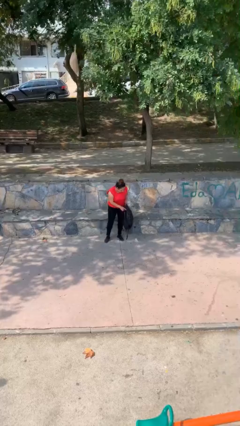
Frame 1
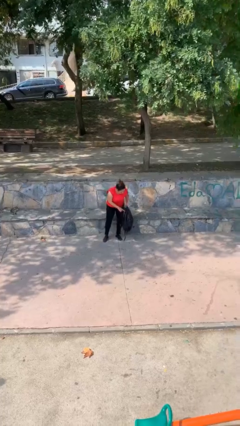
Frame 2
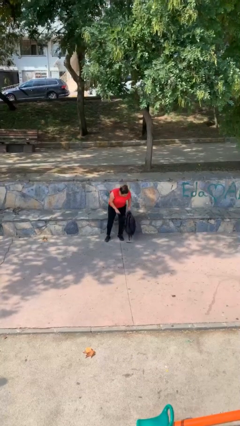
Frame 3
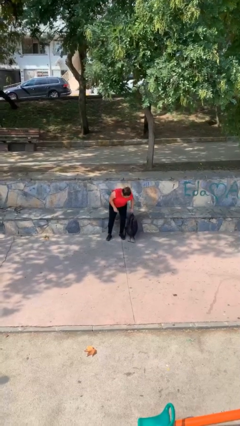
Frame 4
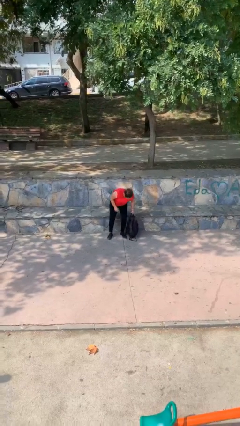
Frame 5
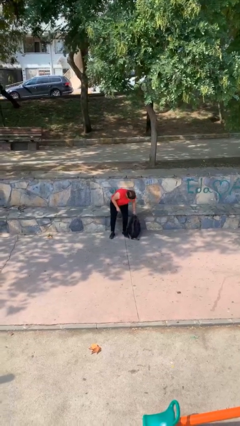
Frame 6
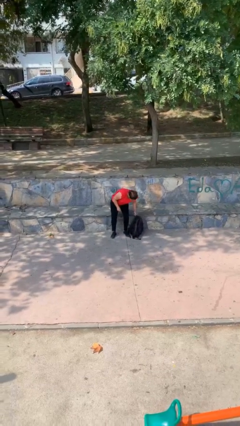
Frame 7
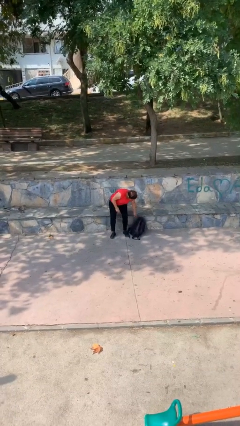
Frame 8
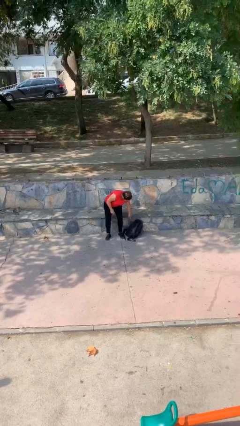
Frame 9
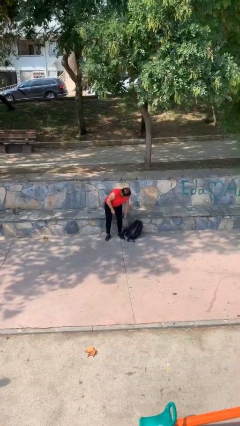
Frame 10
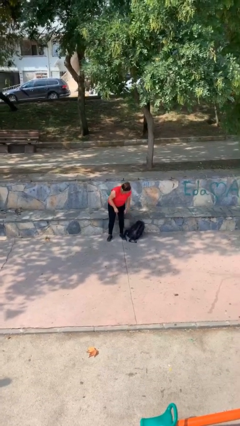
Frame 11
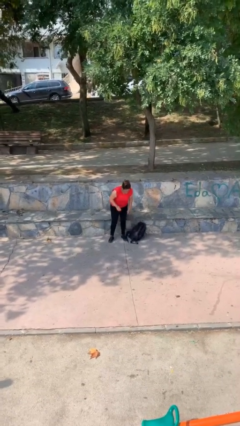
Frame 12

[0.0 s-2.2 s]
person puts down object on floor

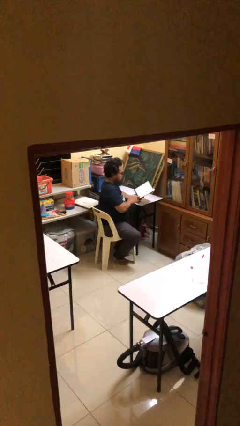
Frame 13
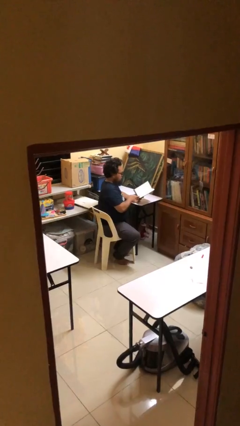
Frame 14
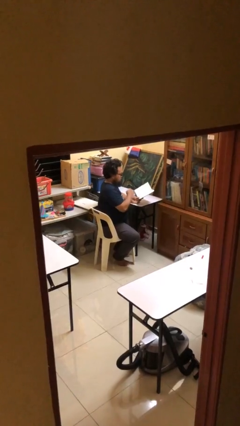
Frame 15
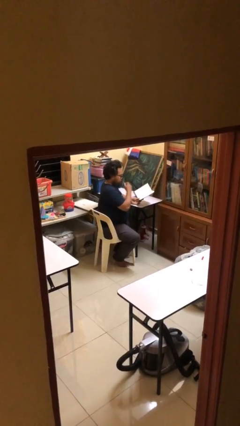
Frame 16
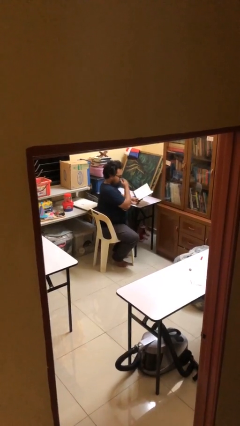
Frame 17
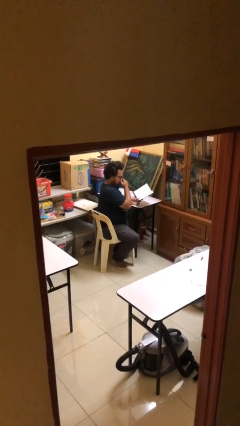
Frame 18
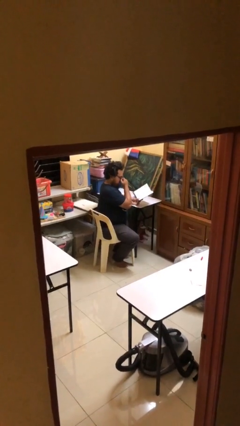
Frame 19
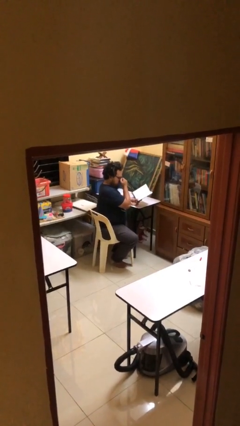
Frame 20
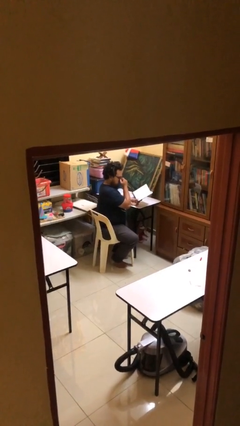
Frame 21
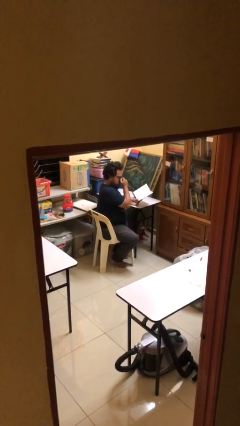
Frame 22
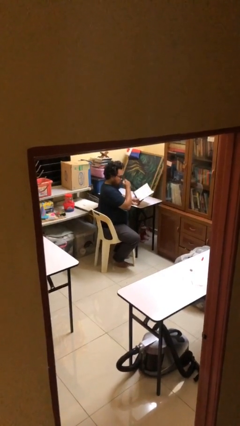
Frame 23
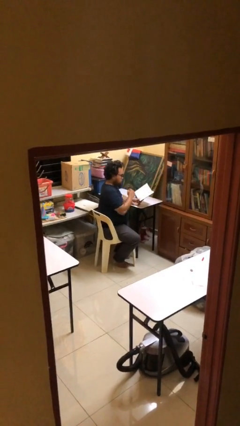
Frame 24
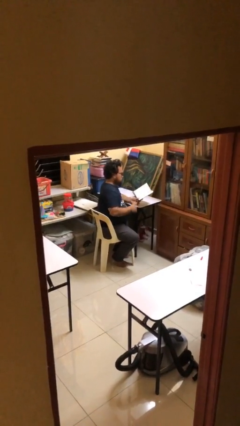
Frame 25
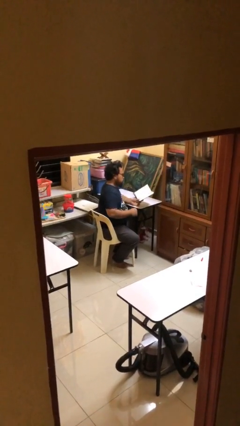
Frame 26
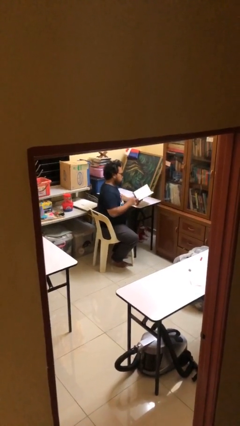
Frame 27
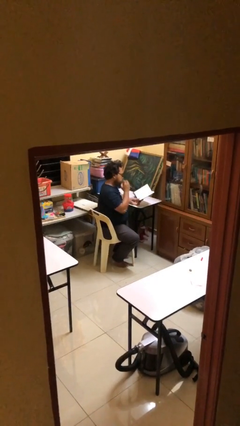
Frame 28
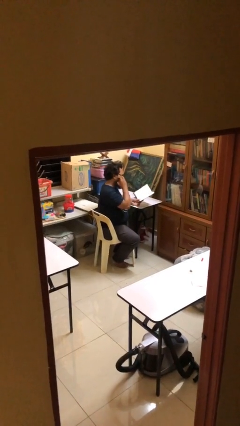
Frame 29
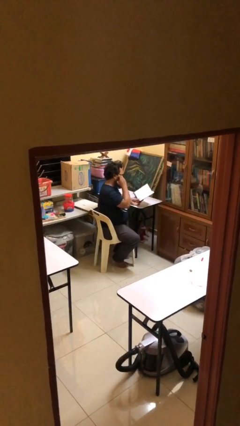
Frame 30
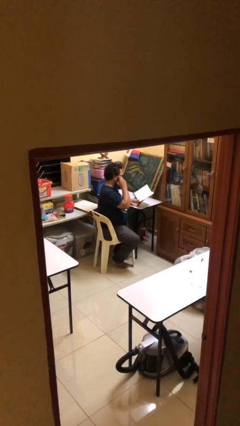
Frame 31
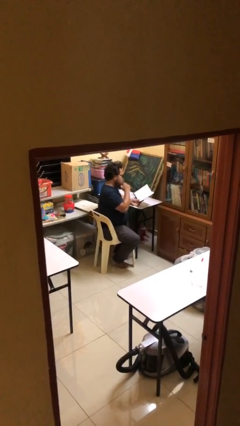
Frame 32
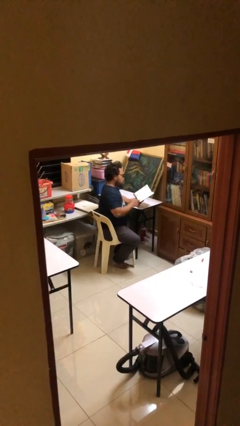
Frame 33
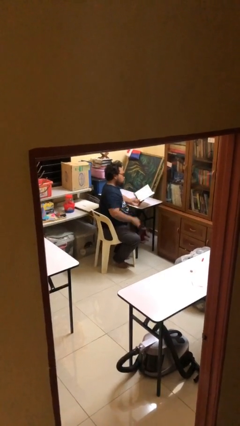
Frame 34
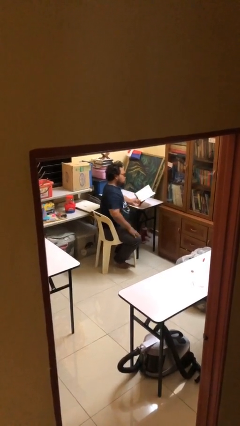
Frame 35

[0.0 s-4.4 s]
person reads document

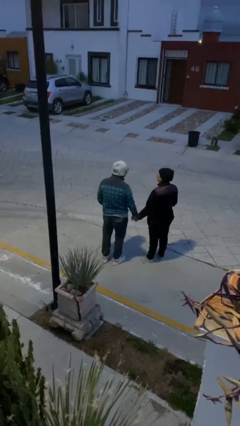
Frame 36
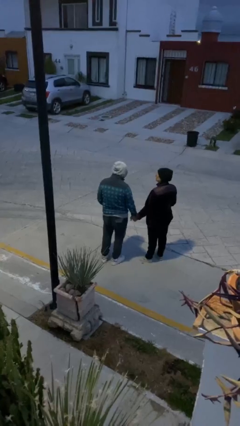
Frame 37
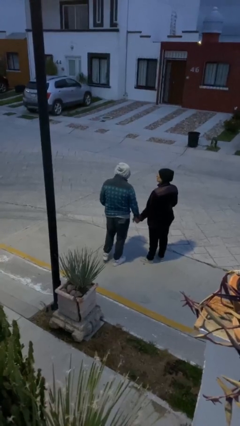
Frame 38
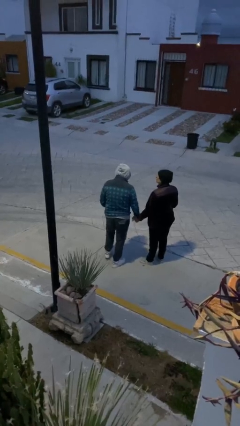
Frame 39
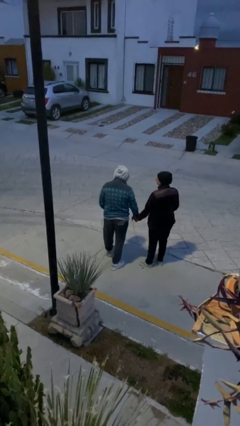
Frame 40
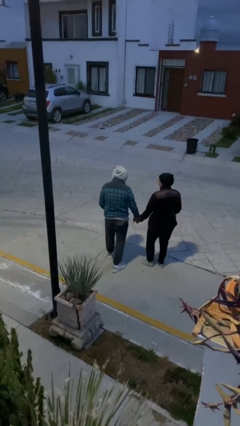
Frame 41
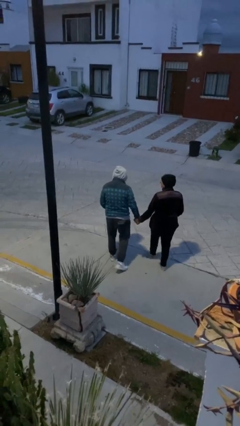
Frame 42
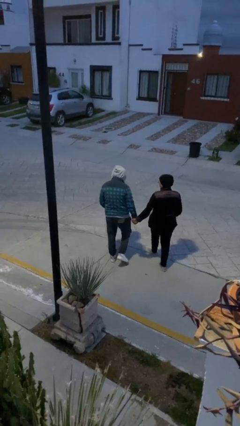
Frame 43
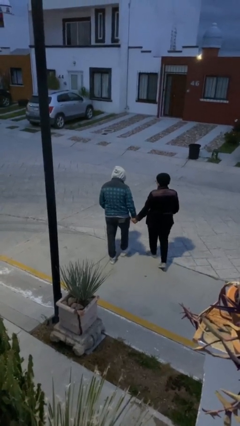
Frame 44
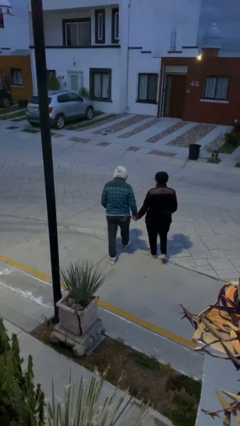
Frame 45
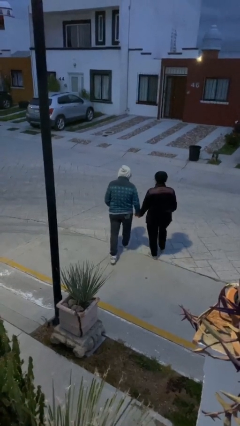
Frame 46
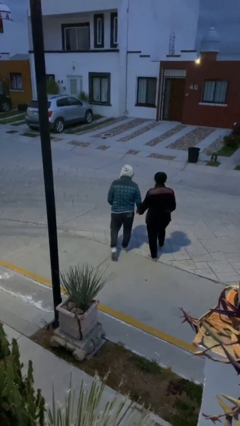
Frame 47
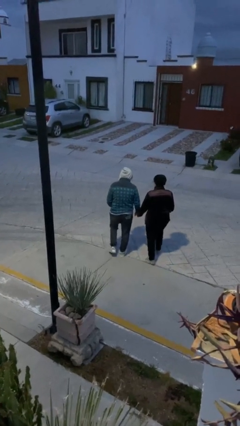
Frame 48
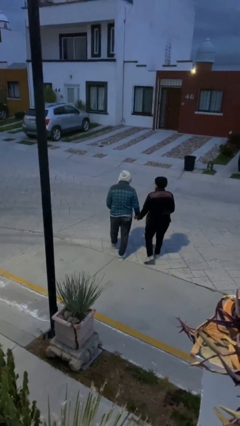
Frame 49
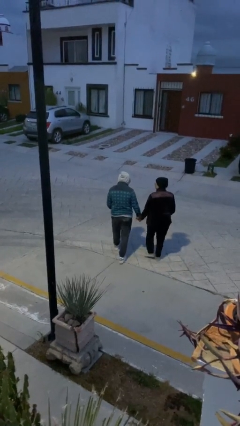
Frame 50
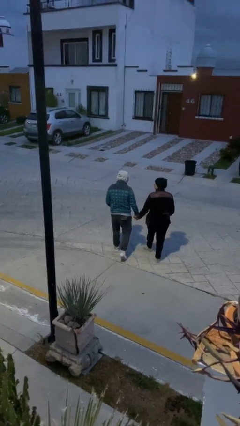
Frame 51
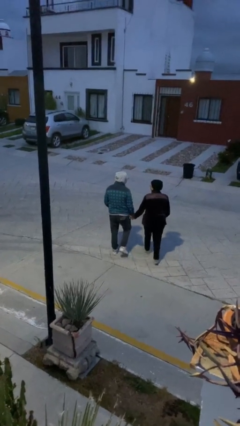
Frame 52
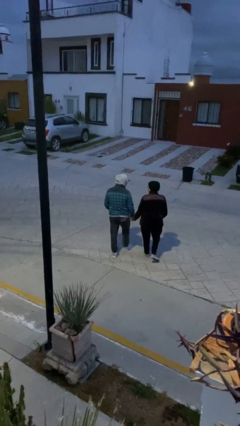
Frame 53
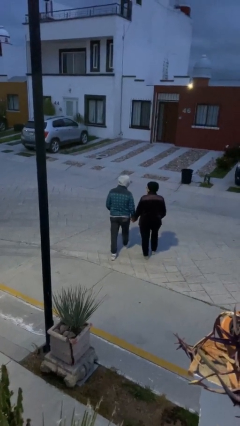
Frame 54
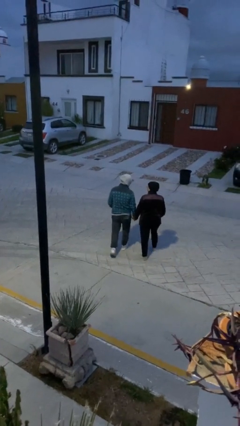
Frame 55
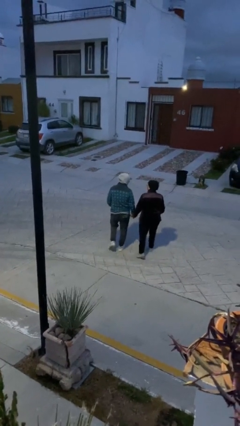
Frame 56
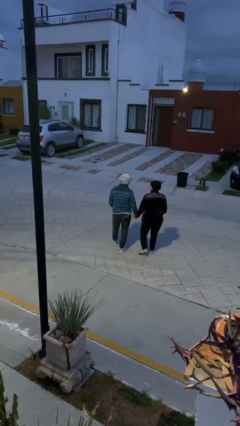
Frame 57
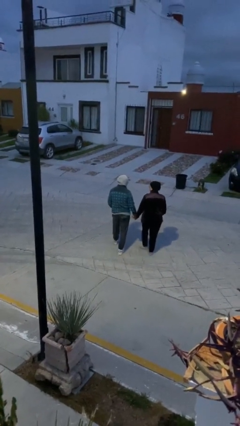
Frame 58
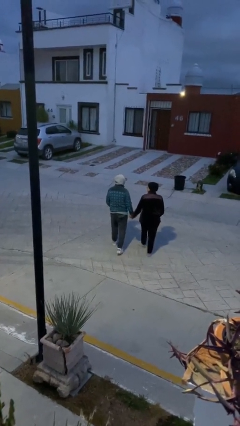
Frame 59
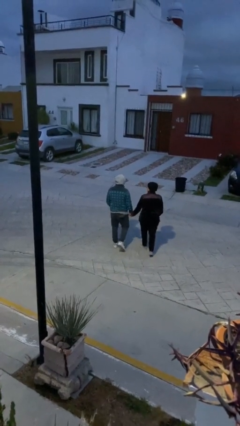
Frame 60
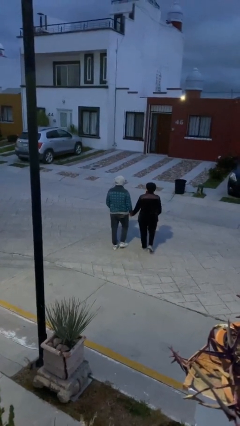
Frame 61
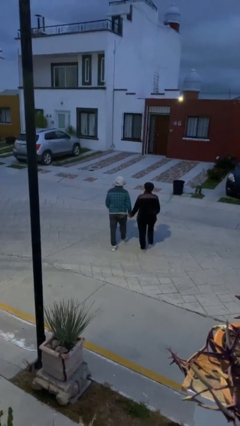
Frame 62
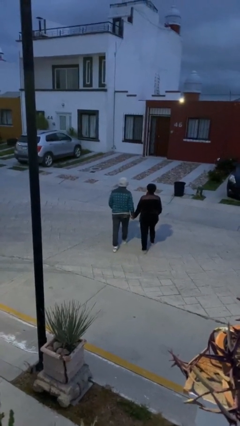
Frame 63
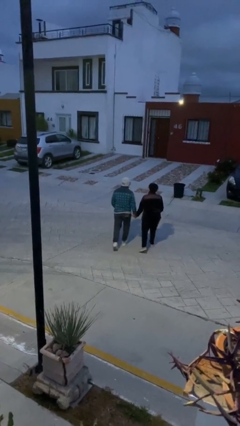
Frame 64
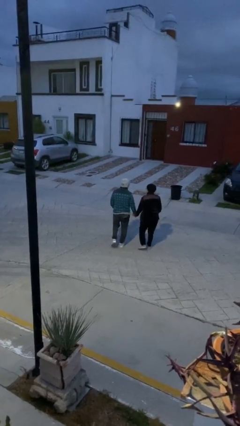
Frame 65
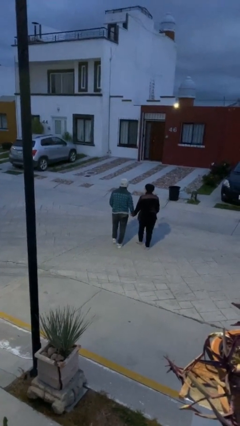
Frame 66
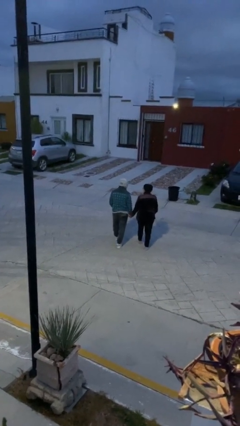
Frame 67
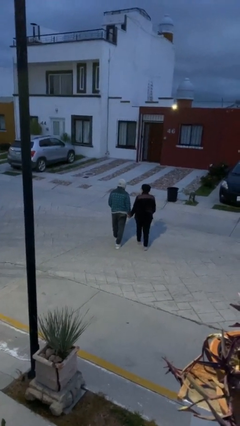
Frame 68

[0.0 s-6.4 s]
person holds hand

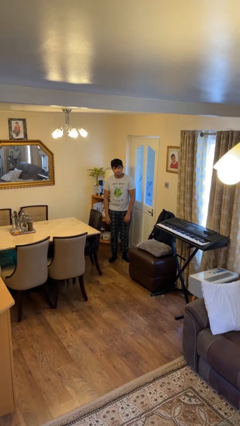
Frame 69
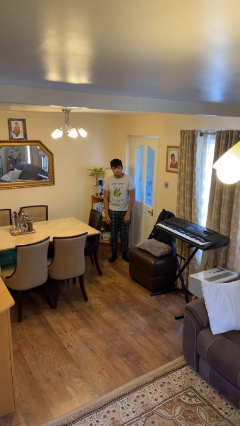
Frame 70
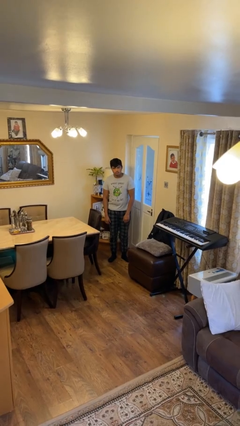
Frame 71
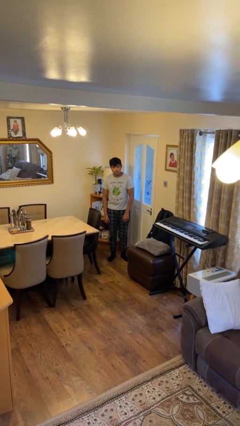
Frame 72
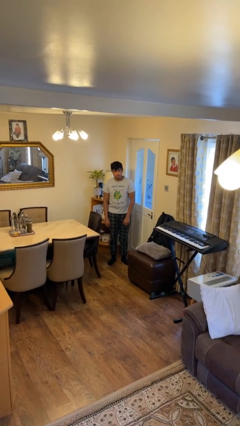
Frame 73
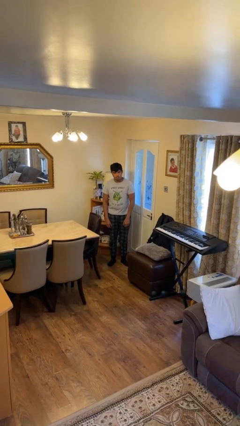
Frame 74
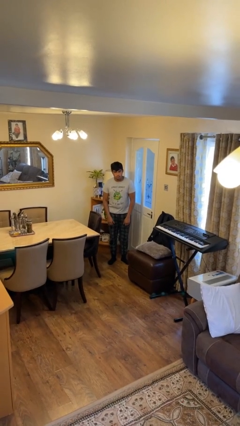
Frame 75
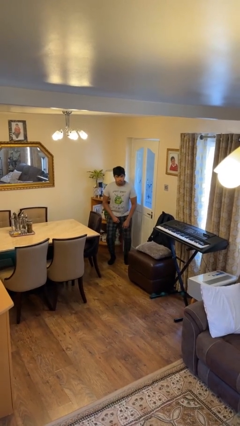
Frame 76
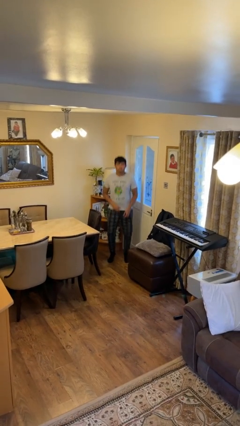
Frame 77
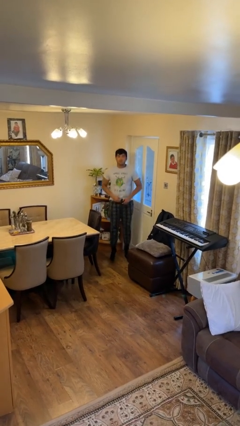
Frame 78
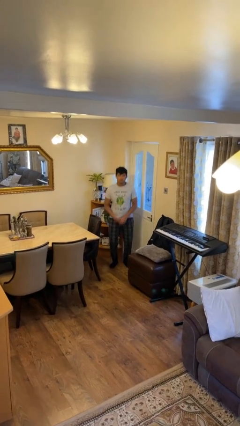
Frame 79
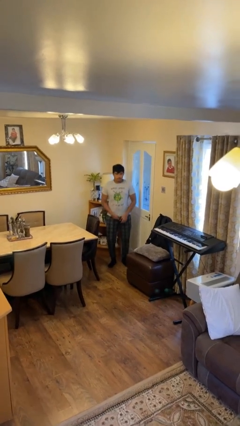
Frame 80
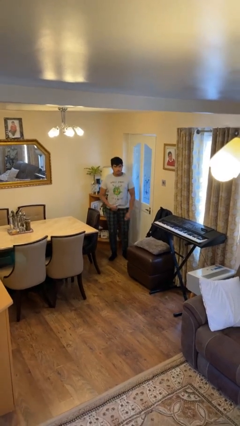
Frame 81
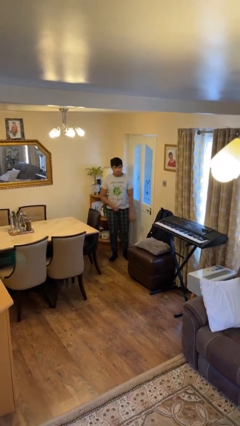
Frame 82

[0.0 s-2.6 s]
person jumps

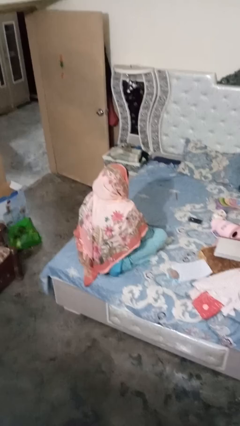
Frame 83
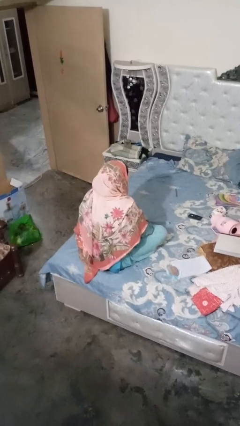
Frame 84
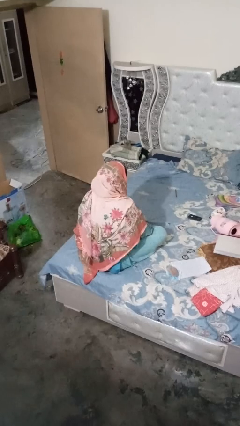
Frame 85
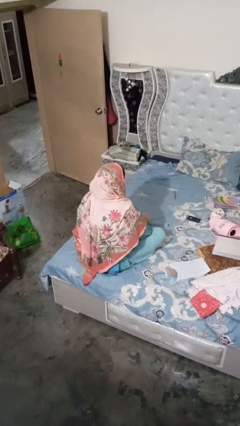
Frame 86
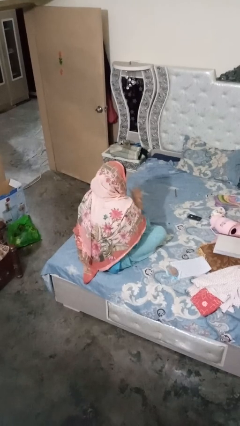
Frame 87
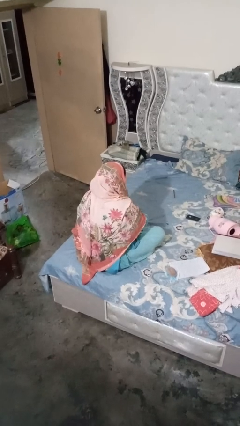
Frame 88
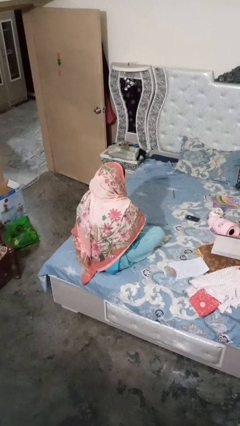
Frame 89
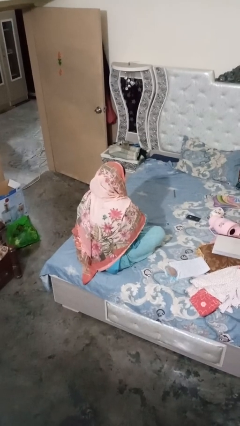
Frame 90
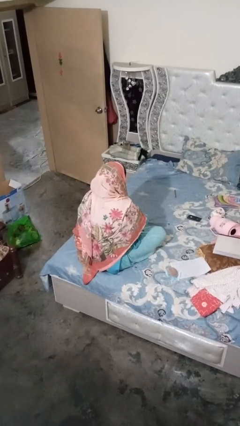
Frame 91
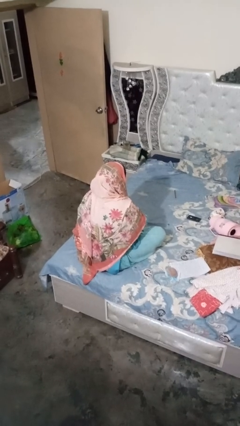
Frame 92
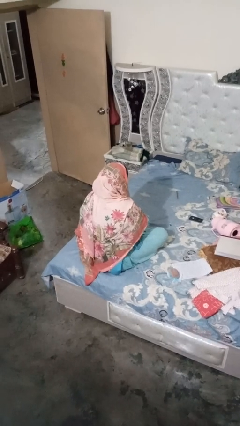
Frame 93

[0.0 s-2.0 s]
person gestures be quiet

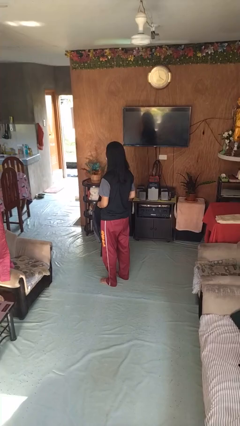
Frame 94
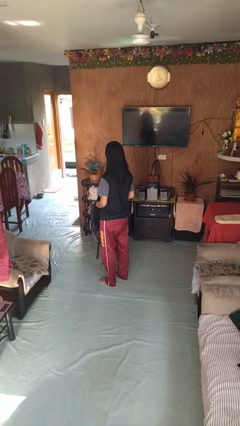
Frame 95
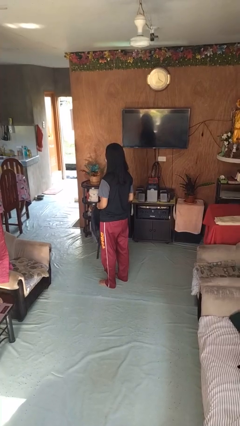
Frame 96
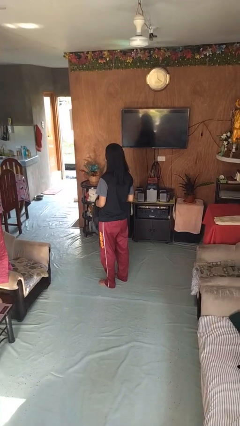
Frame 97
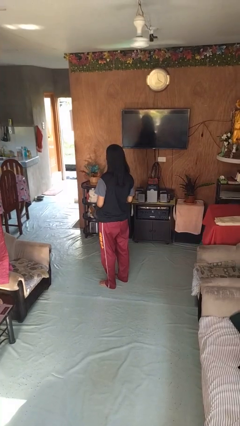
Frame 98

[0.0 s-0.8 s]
person puts on backpack
